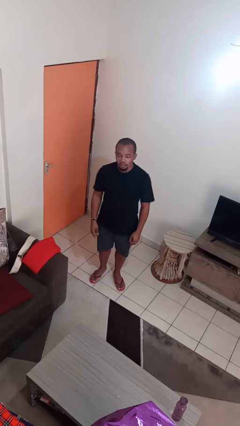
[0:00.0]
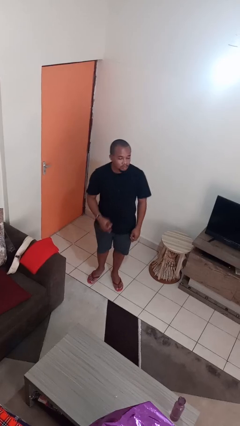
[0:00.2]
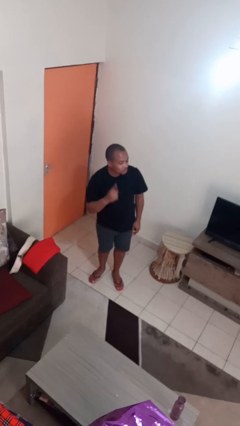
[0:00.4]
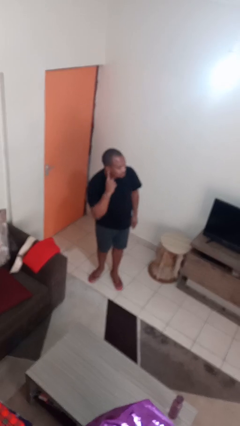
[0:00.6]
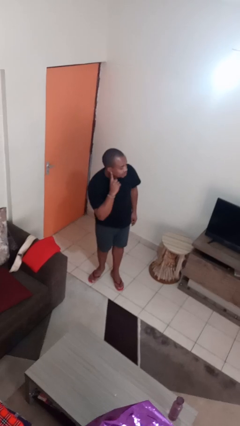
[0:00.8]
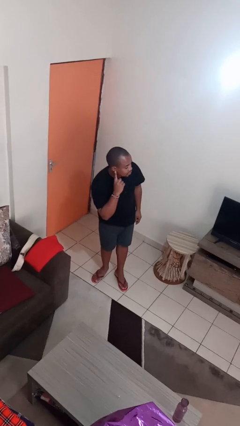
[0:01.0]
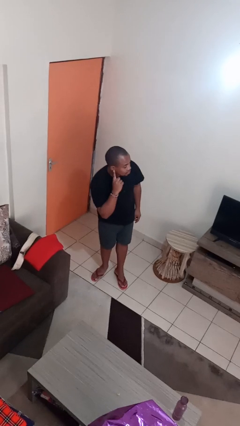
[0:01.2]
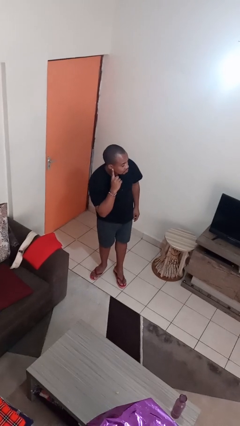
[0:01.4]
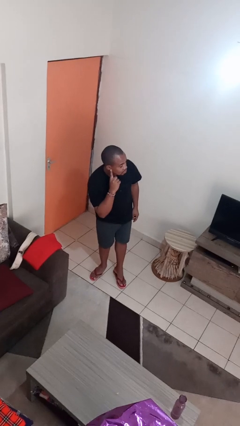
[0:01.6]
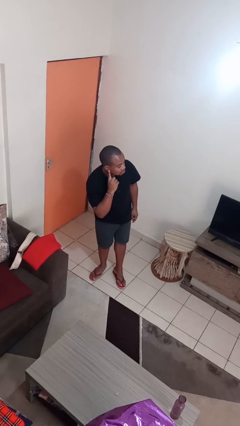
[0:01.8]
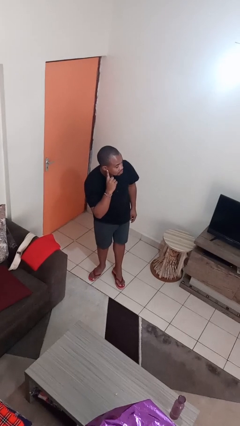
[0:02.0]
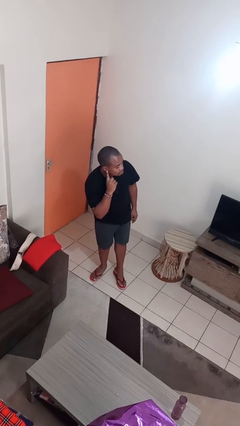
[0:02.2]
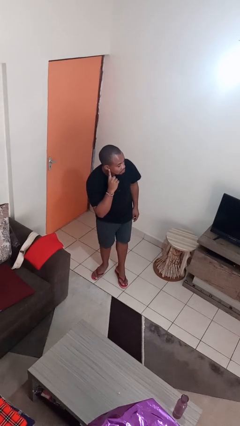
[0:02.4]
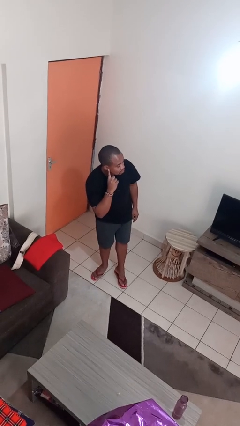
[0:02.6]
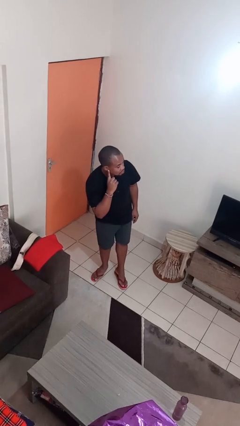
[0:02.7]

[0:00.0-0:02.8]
person gestures listen closely

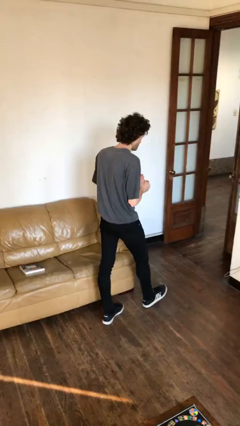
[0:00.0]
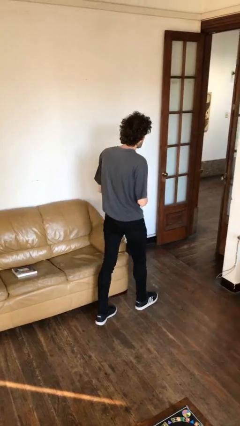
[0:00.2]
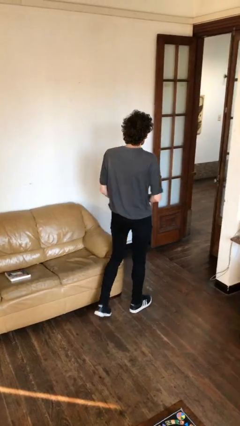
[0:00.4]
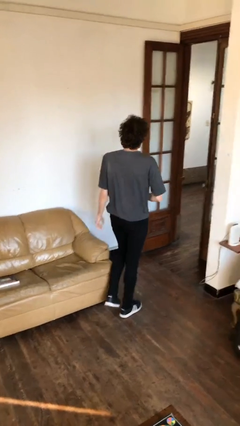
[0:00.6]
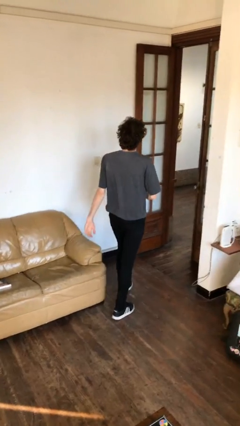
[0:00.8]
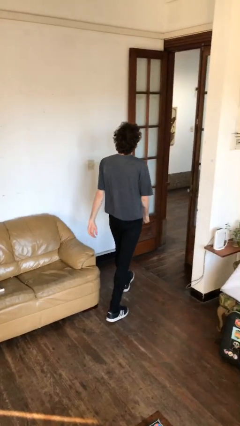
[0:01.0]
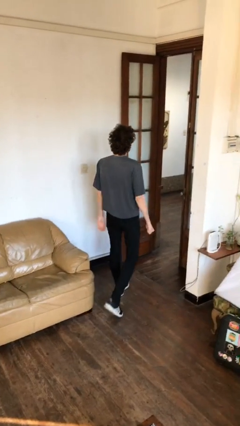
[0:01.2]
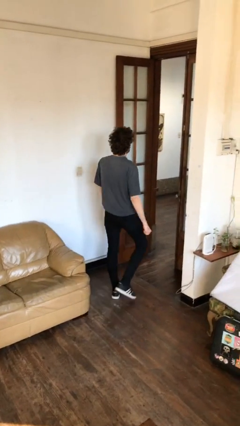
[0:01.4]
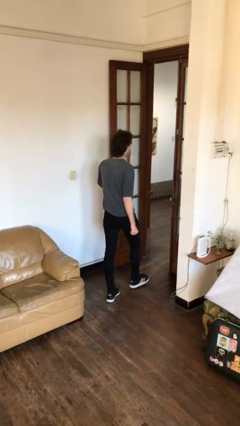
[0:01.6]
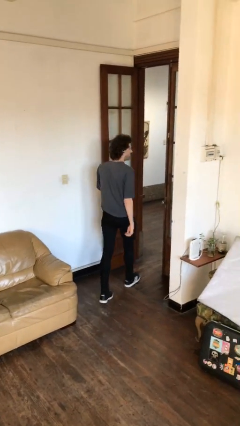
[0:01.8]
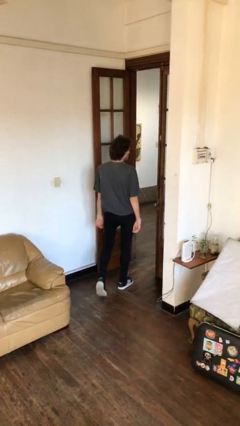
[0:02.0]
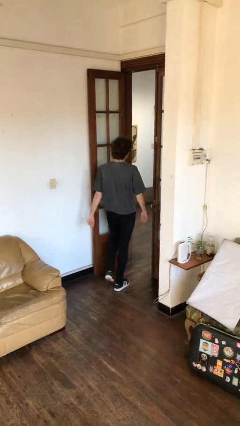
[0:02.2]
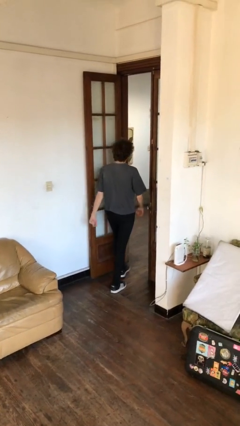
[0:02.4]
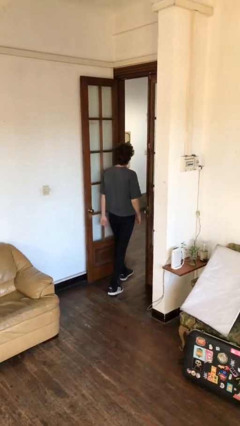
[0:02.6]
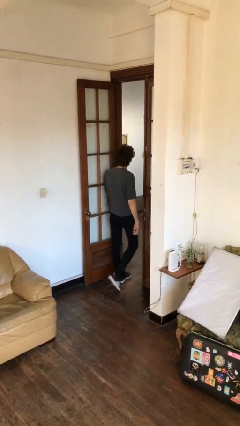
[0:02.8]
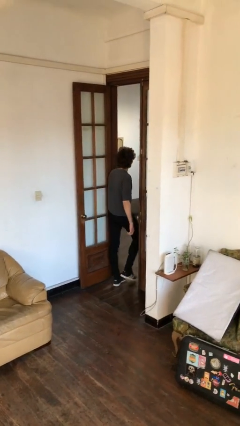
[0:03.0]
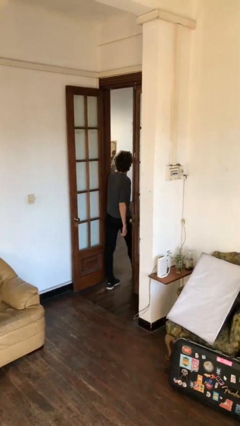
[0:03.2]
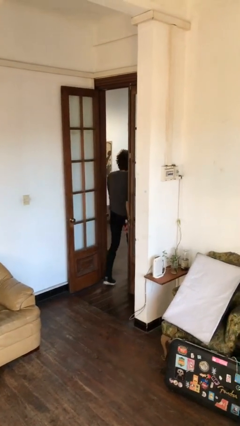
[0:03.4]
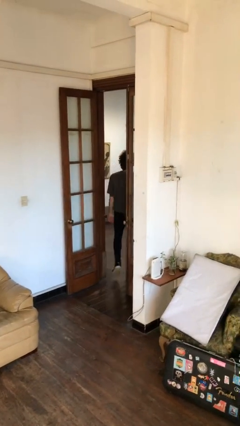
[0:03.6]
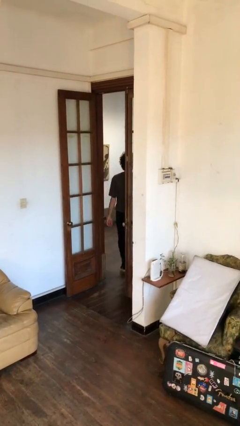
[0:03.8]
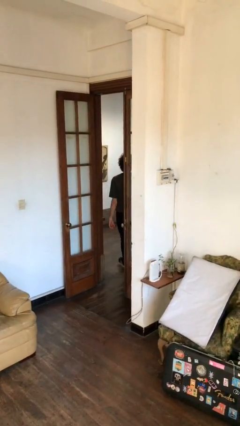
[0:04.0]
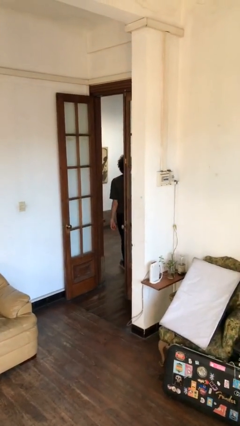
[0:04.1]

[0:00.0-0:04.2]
person exits scene through structure

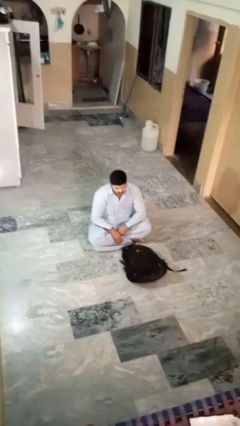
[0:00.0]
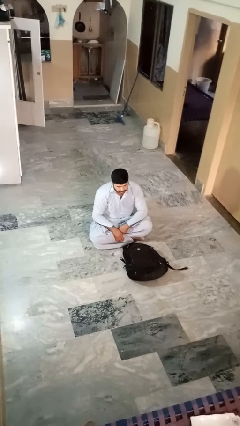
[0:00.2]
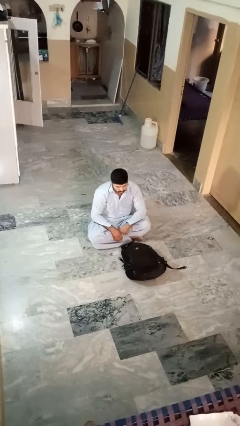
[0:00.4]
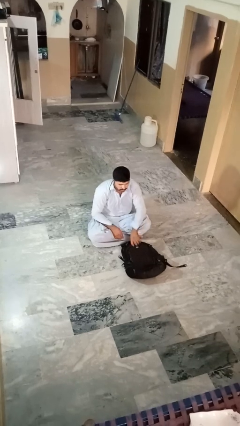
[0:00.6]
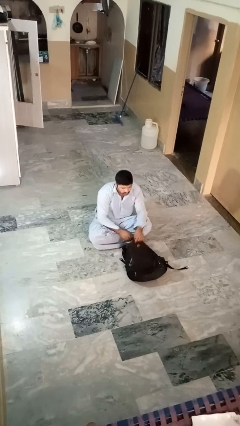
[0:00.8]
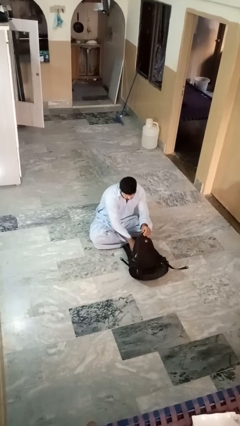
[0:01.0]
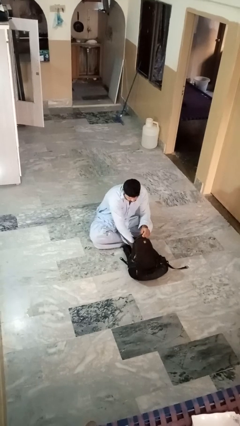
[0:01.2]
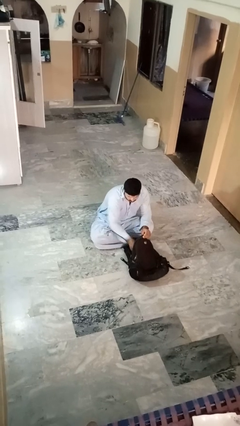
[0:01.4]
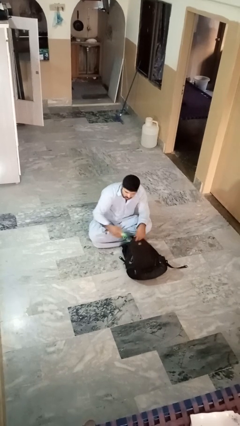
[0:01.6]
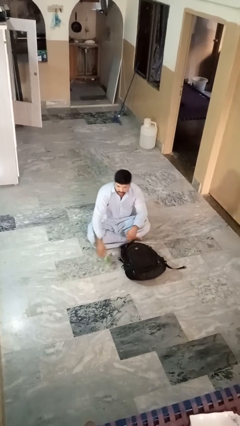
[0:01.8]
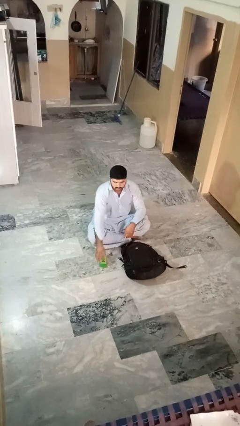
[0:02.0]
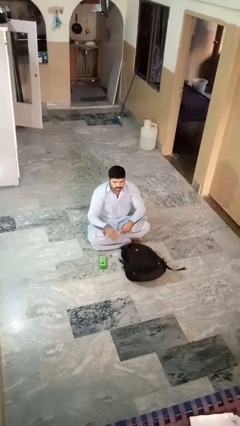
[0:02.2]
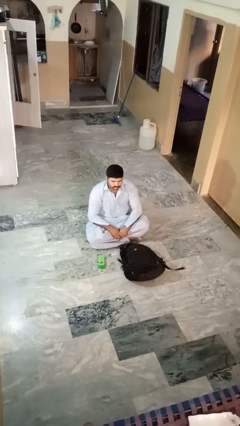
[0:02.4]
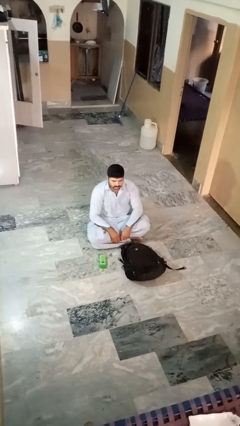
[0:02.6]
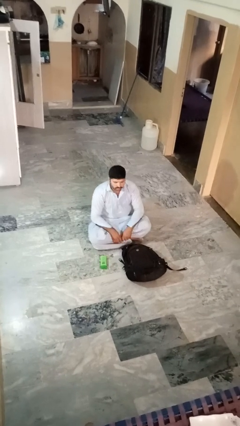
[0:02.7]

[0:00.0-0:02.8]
person takes object from bag

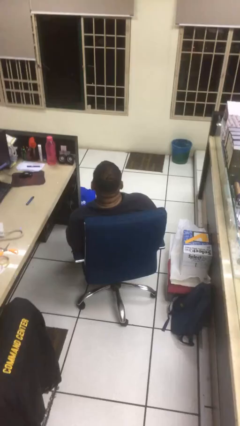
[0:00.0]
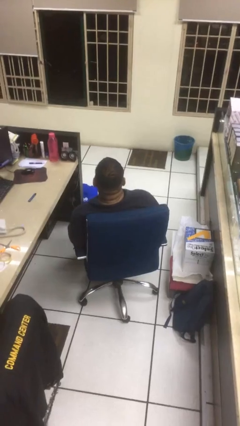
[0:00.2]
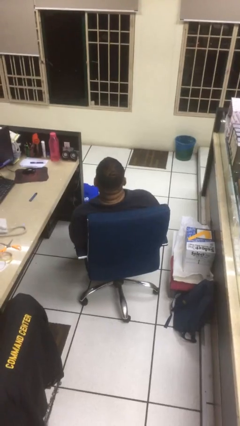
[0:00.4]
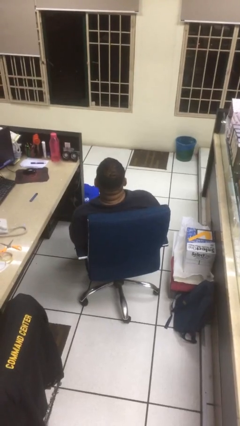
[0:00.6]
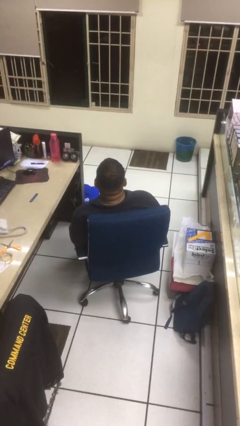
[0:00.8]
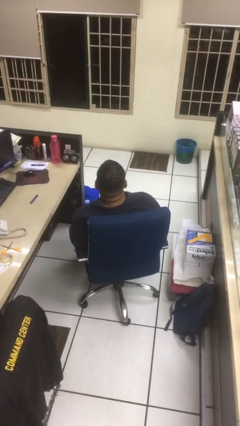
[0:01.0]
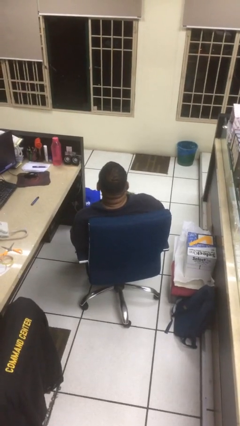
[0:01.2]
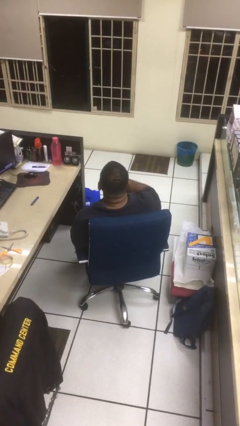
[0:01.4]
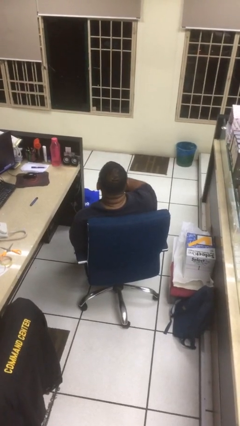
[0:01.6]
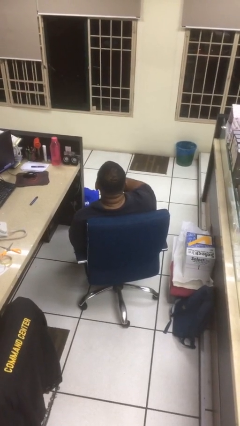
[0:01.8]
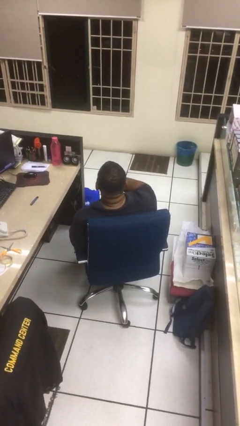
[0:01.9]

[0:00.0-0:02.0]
person gestures be quiet

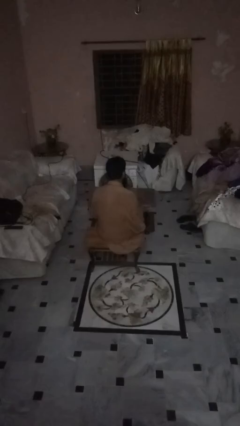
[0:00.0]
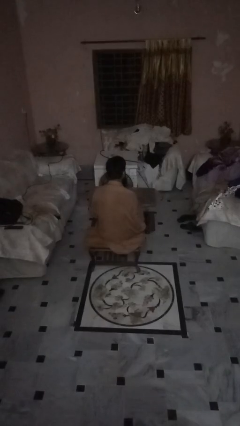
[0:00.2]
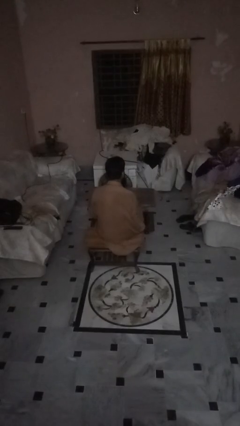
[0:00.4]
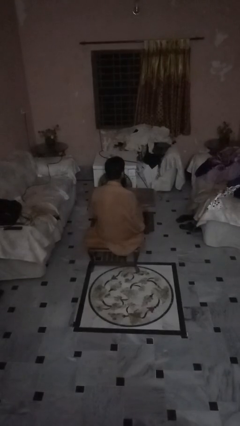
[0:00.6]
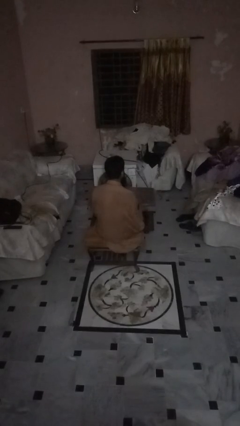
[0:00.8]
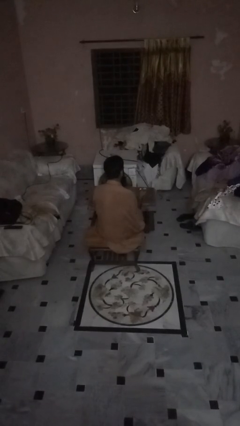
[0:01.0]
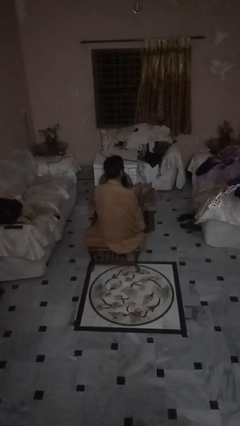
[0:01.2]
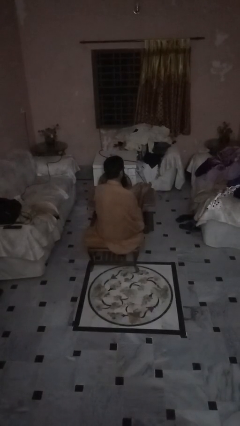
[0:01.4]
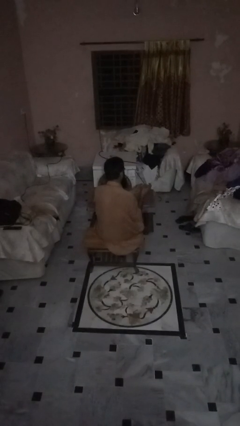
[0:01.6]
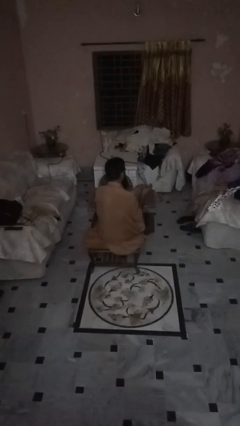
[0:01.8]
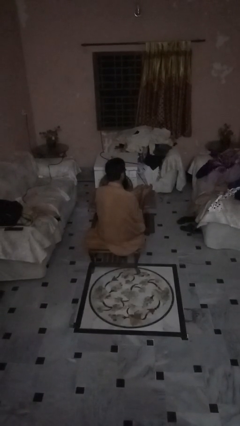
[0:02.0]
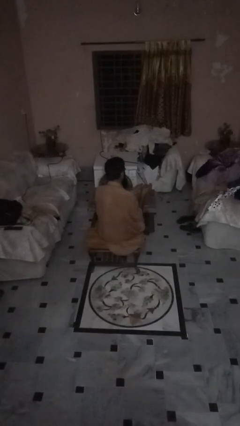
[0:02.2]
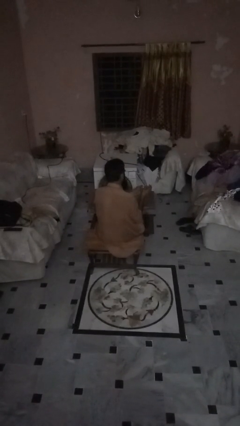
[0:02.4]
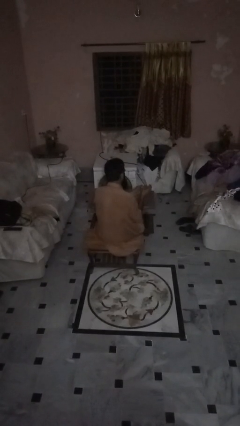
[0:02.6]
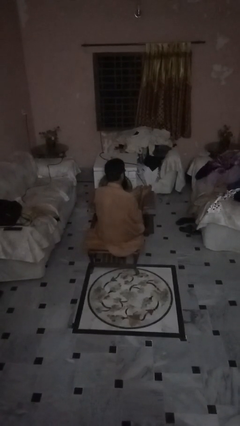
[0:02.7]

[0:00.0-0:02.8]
person clips fingernails

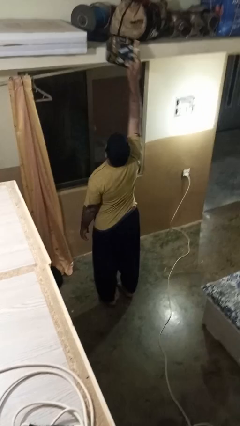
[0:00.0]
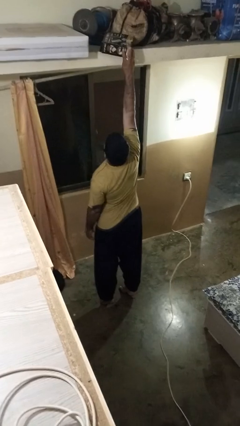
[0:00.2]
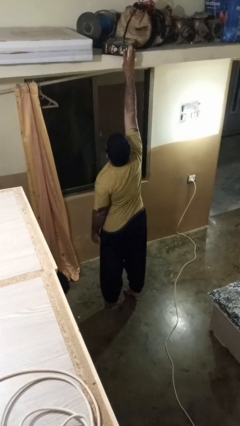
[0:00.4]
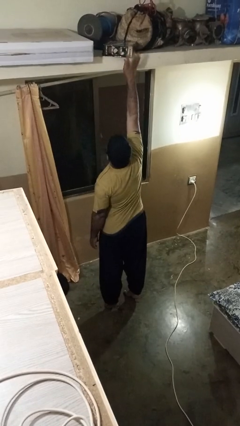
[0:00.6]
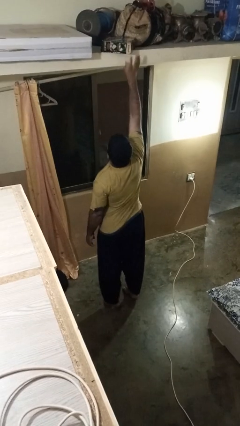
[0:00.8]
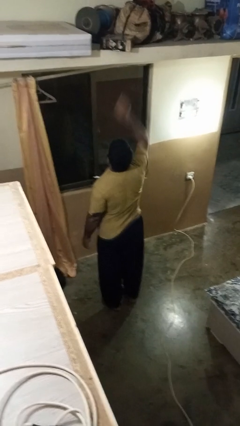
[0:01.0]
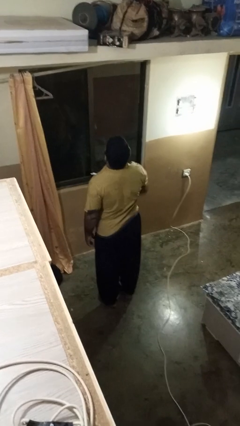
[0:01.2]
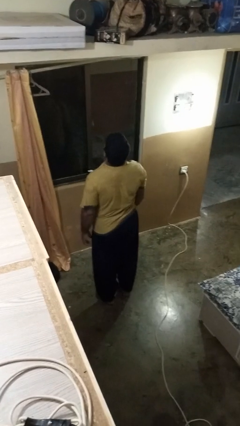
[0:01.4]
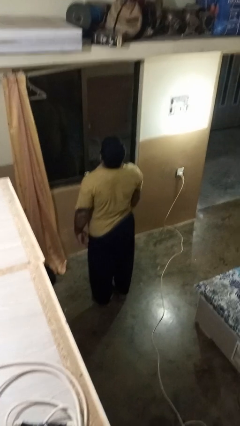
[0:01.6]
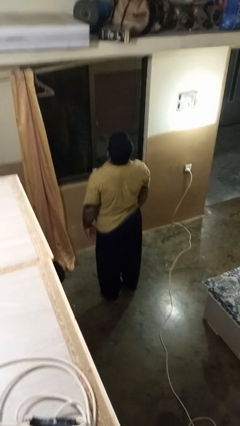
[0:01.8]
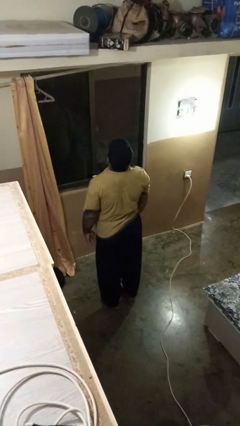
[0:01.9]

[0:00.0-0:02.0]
person puts down object on shelf

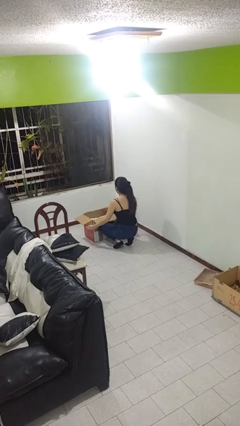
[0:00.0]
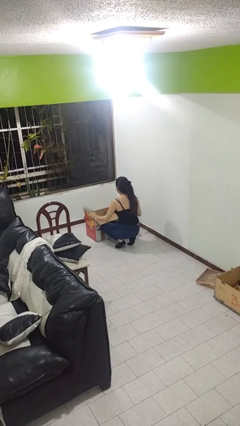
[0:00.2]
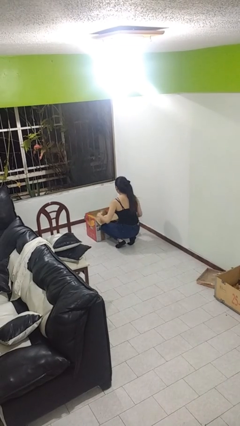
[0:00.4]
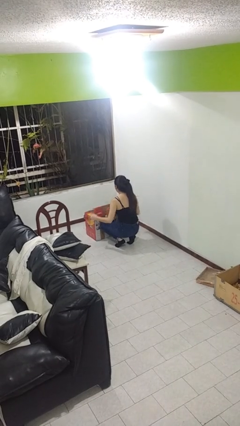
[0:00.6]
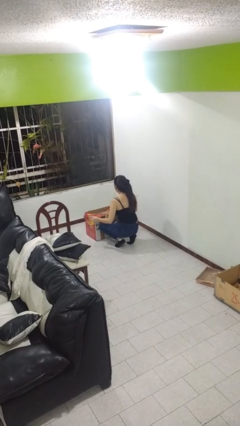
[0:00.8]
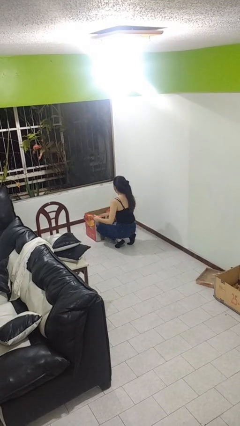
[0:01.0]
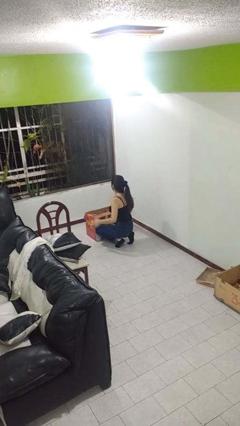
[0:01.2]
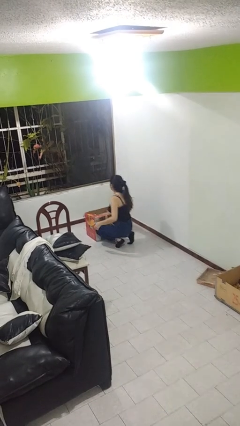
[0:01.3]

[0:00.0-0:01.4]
person closes box
